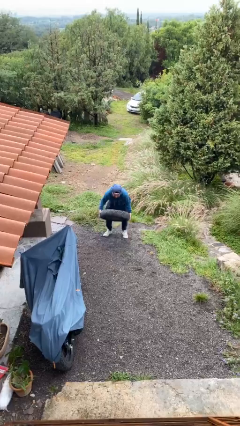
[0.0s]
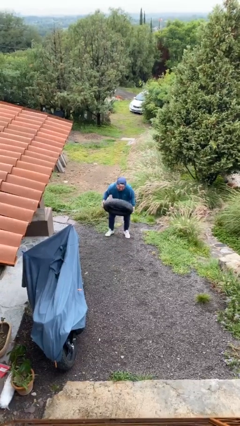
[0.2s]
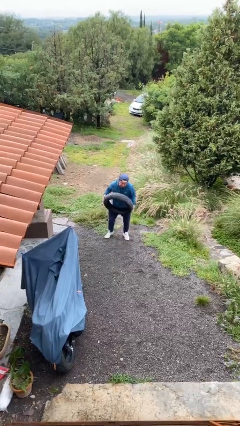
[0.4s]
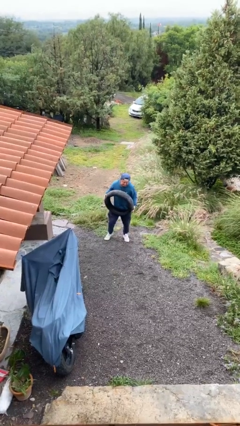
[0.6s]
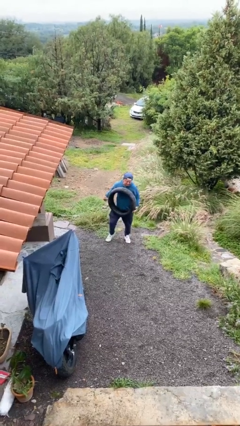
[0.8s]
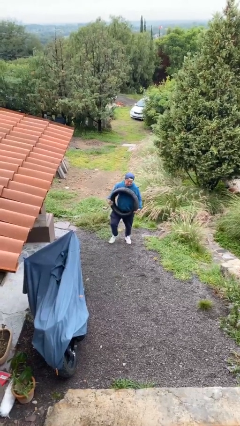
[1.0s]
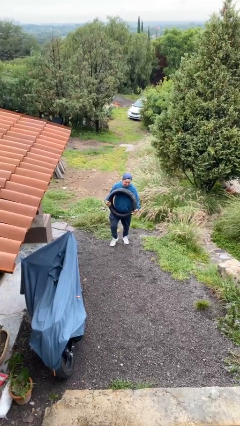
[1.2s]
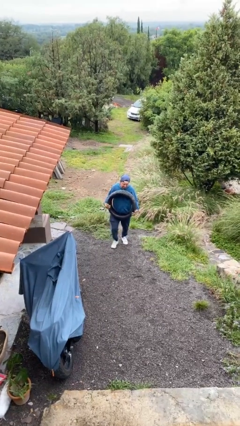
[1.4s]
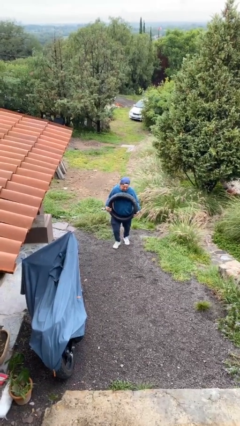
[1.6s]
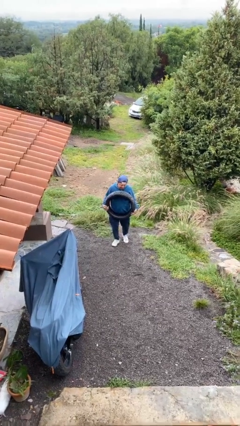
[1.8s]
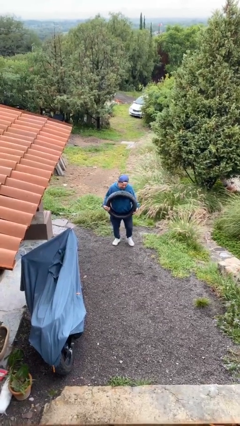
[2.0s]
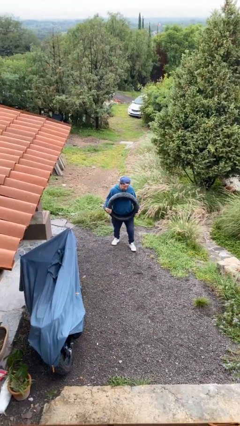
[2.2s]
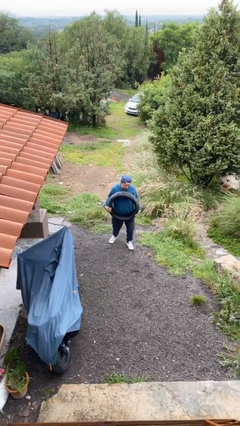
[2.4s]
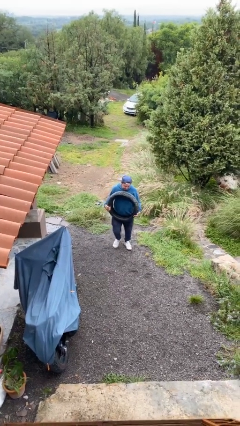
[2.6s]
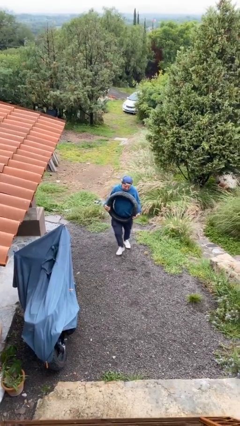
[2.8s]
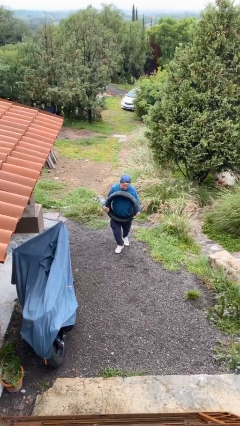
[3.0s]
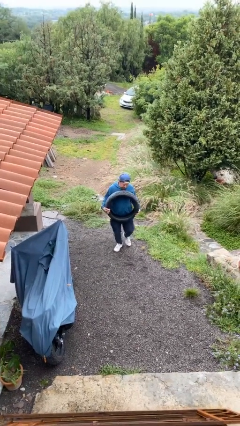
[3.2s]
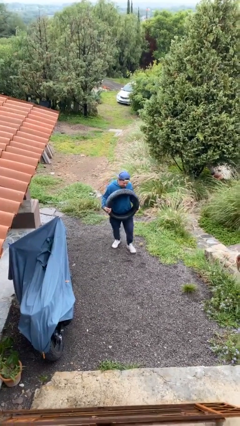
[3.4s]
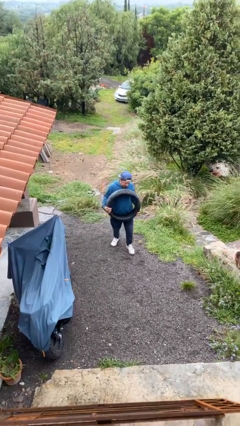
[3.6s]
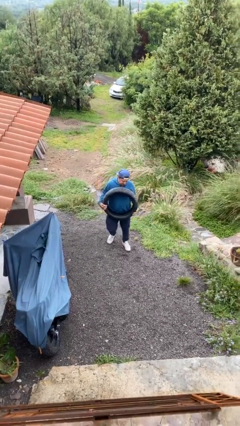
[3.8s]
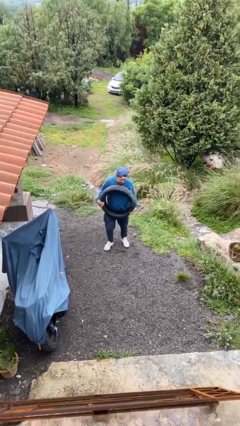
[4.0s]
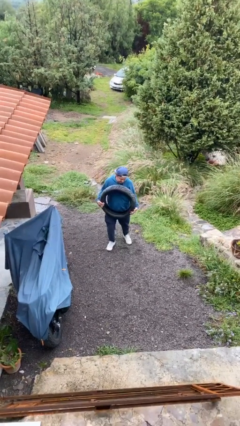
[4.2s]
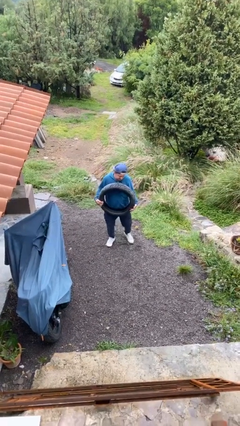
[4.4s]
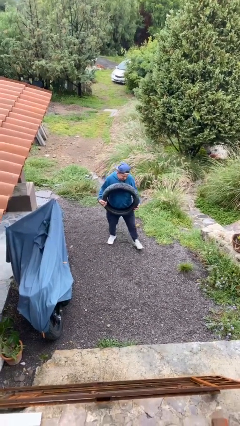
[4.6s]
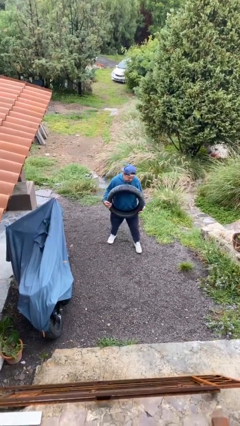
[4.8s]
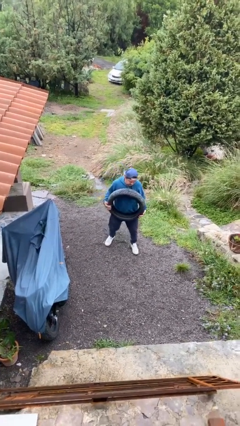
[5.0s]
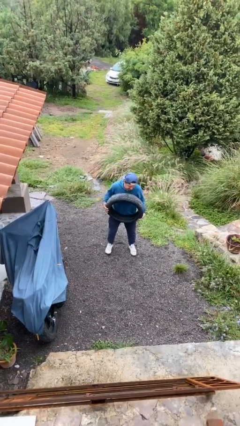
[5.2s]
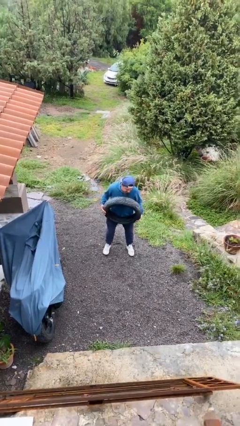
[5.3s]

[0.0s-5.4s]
person carries heavy object

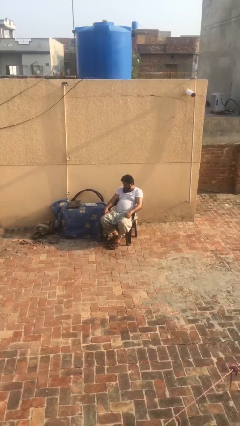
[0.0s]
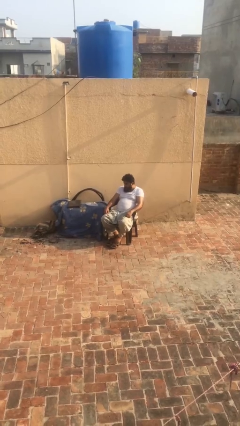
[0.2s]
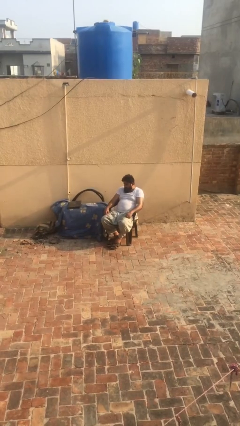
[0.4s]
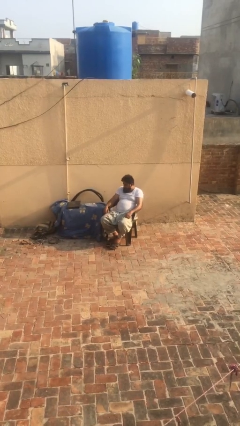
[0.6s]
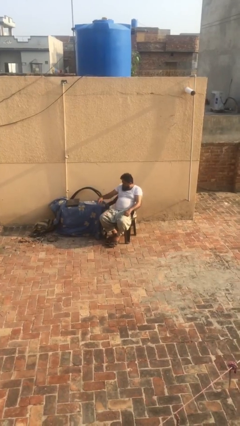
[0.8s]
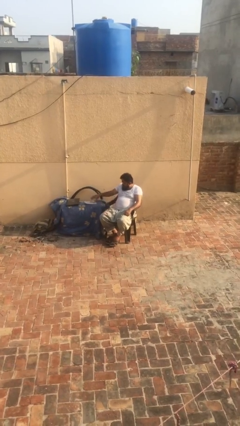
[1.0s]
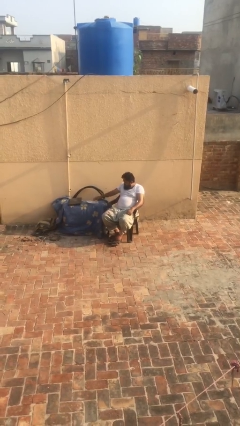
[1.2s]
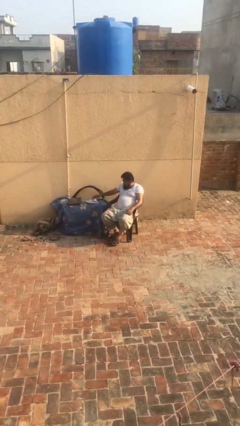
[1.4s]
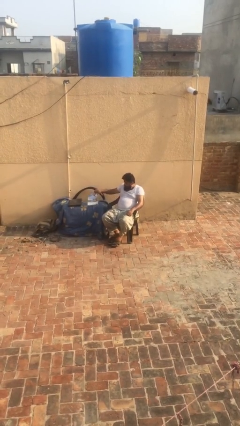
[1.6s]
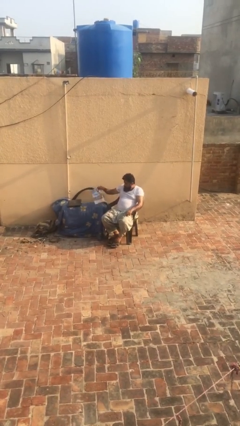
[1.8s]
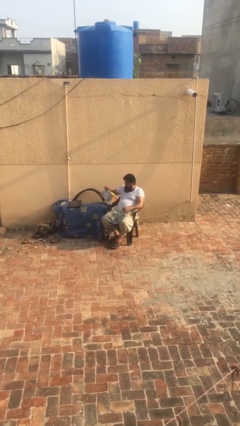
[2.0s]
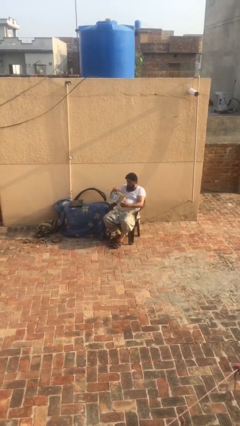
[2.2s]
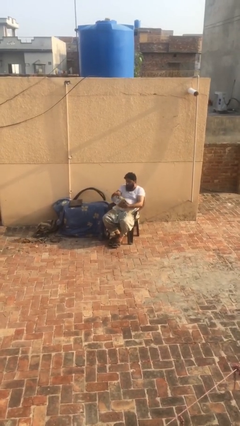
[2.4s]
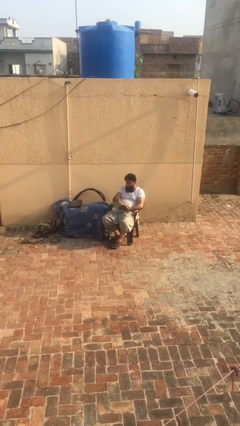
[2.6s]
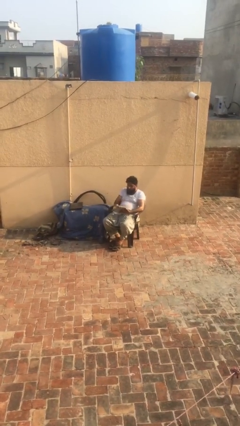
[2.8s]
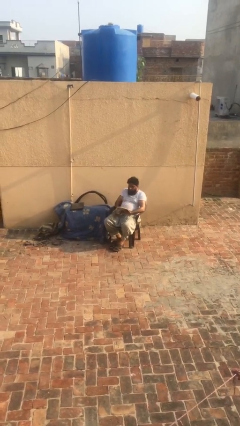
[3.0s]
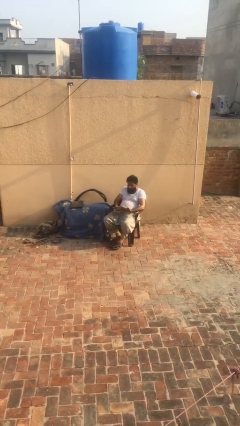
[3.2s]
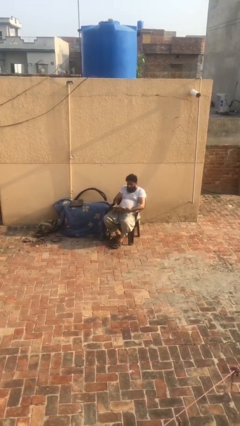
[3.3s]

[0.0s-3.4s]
person picks up object from table

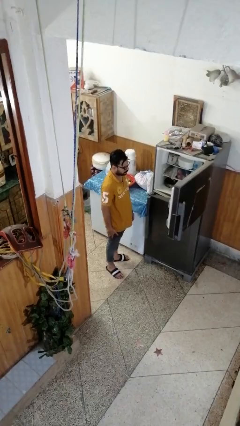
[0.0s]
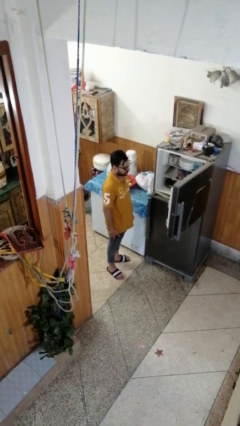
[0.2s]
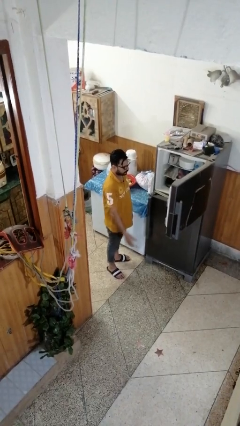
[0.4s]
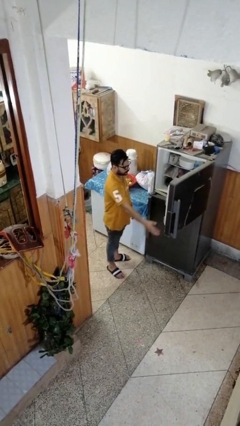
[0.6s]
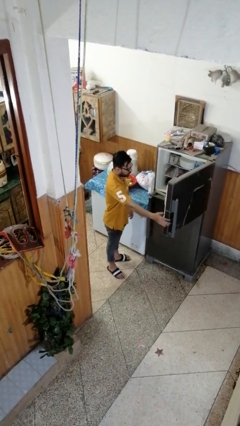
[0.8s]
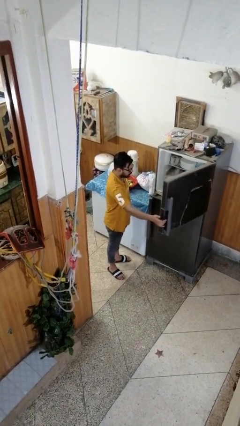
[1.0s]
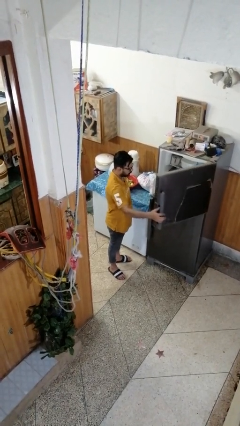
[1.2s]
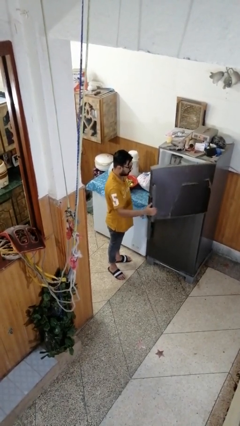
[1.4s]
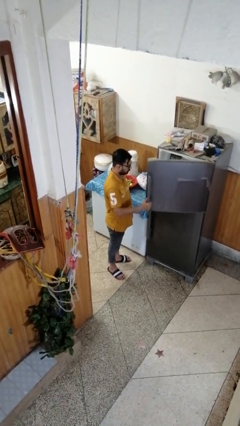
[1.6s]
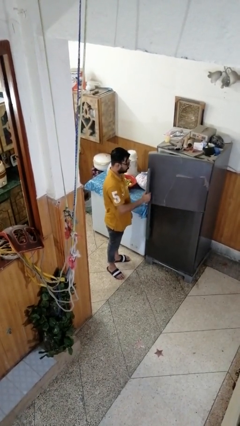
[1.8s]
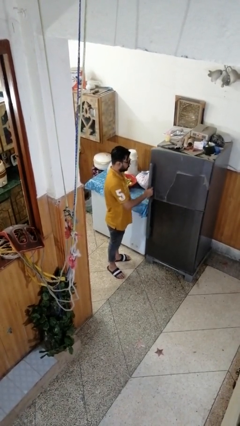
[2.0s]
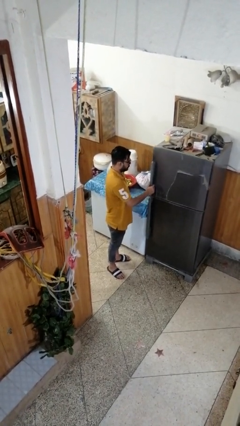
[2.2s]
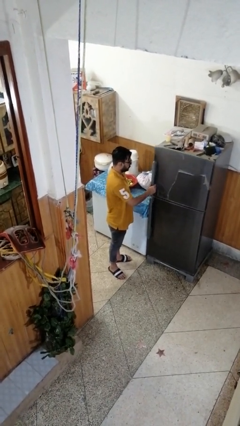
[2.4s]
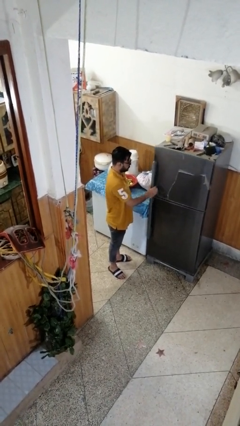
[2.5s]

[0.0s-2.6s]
person closes refrigerator

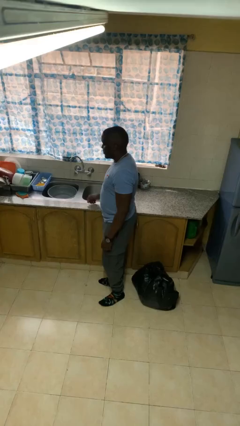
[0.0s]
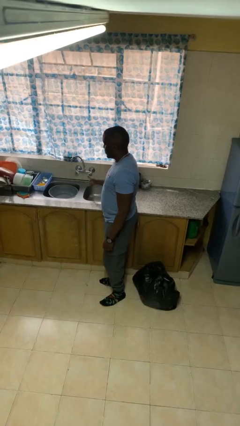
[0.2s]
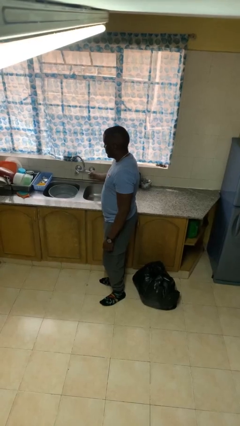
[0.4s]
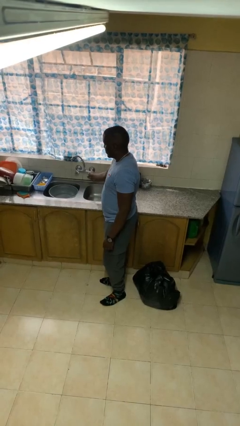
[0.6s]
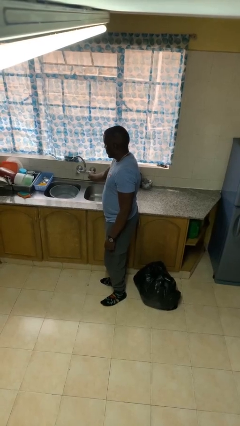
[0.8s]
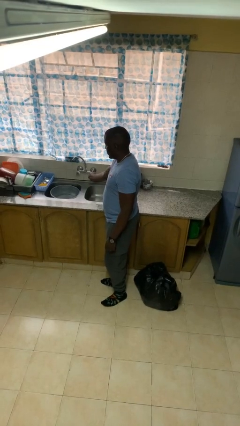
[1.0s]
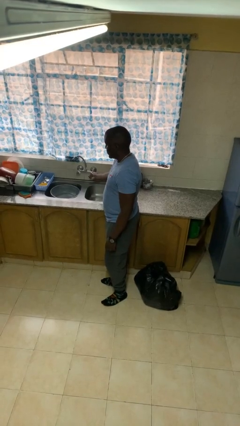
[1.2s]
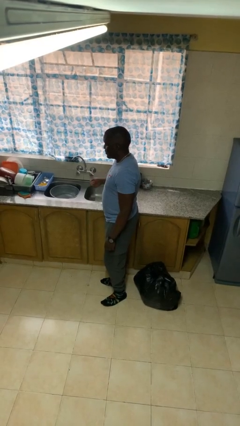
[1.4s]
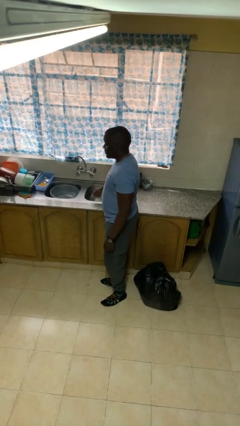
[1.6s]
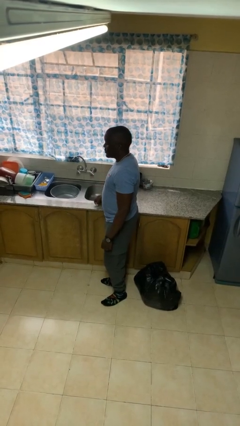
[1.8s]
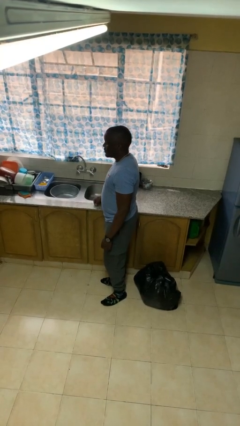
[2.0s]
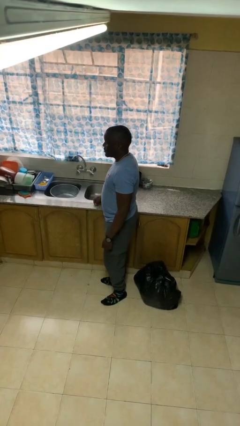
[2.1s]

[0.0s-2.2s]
person turns off faucet

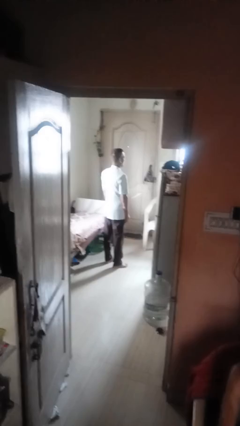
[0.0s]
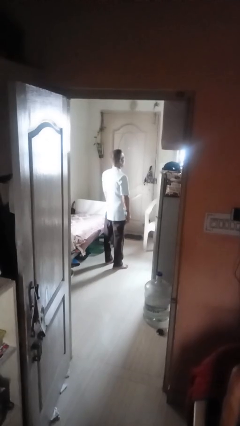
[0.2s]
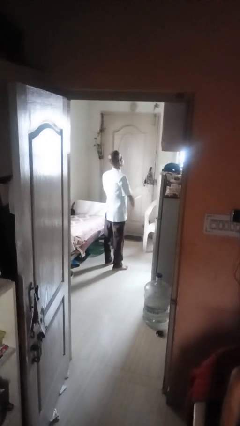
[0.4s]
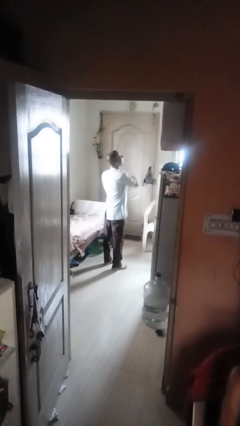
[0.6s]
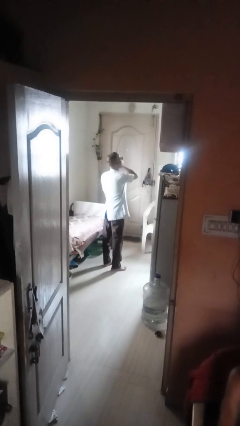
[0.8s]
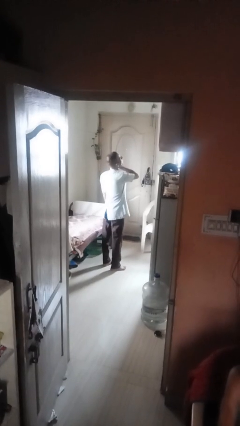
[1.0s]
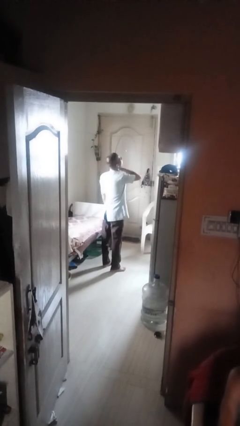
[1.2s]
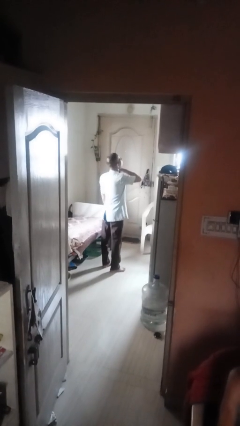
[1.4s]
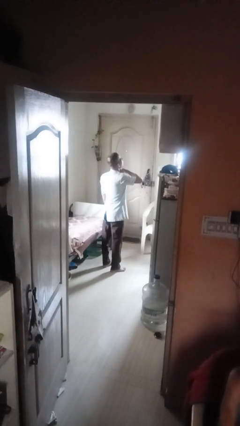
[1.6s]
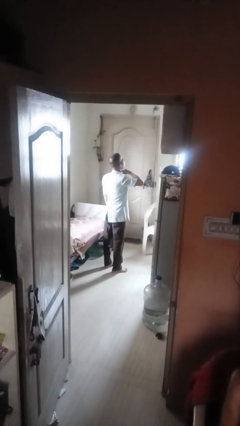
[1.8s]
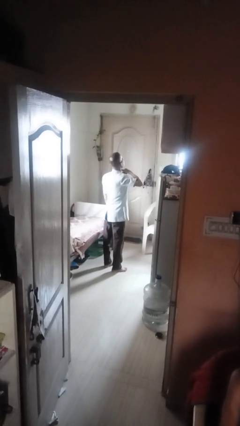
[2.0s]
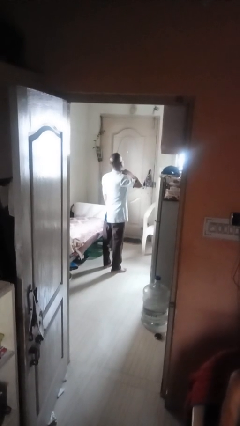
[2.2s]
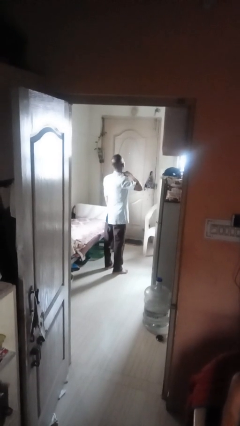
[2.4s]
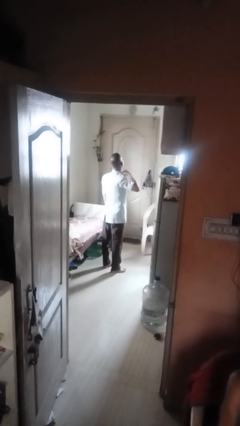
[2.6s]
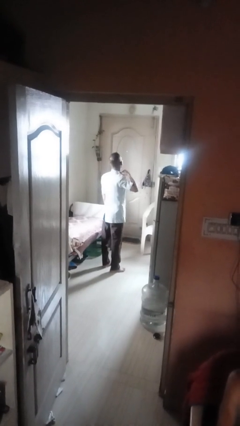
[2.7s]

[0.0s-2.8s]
person gestures cut

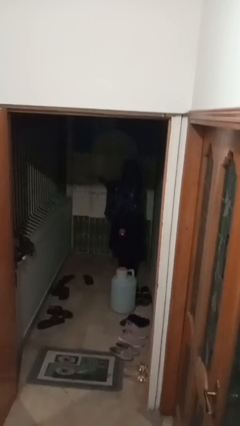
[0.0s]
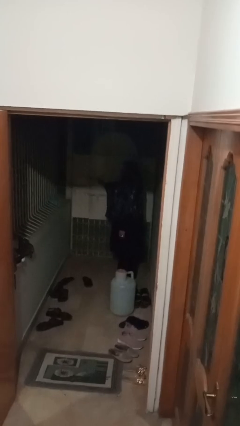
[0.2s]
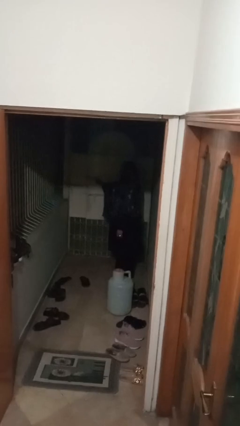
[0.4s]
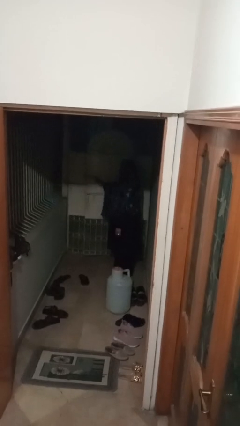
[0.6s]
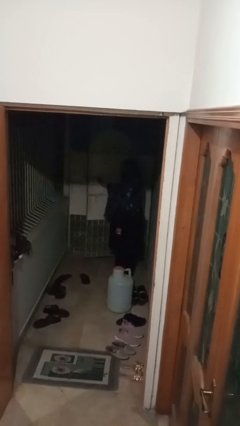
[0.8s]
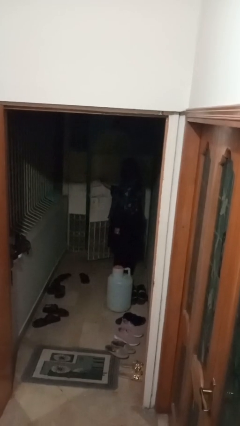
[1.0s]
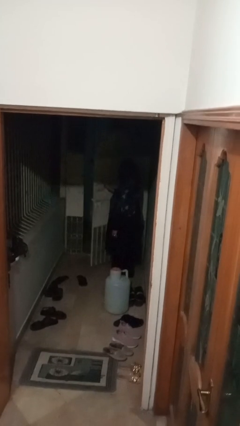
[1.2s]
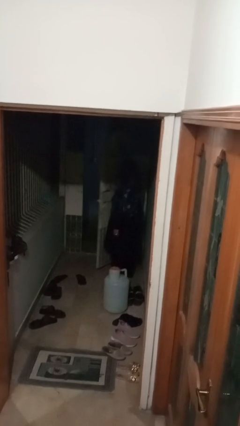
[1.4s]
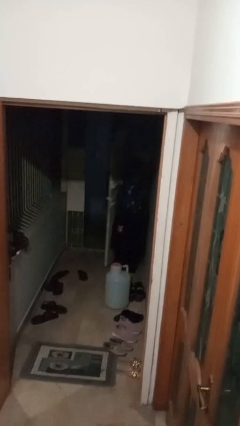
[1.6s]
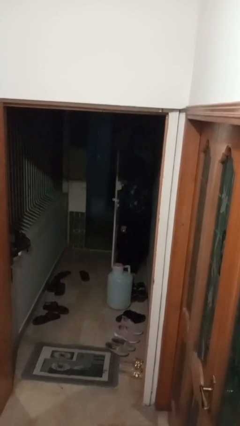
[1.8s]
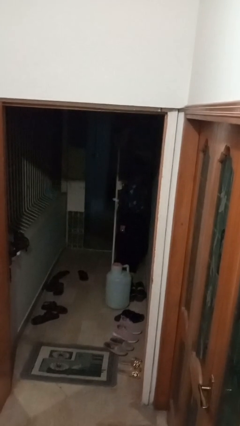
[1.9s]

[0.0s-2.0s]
person opens gate
